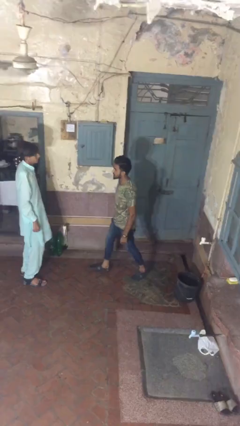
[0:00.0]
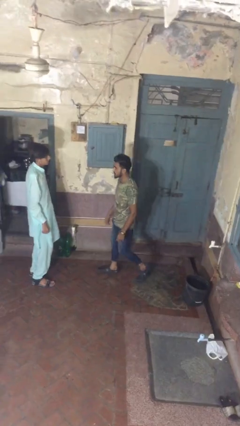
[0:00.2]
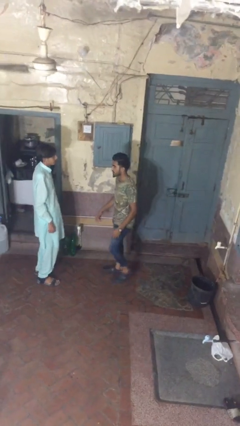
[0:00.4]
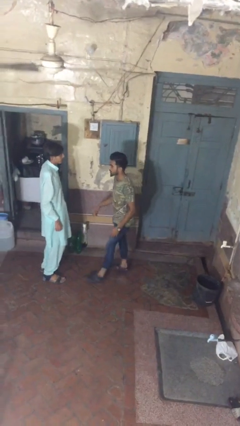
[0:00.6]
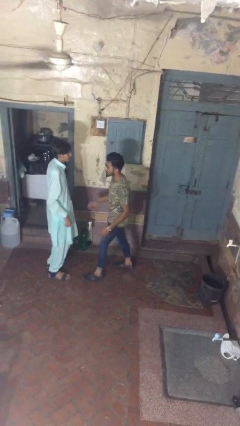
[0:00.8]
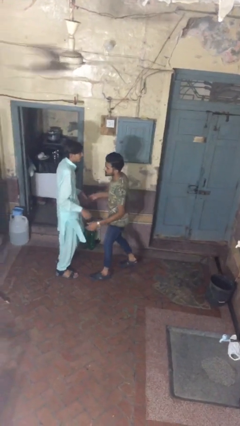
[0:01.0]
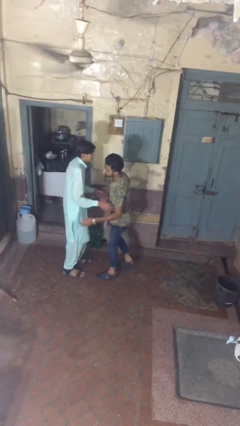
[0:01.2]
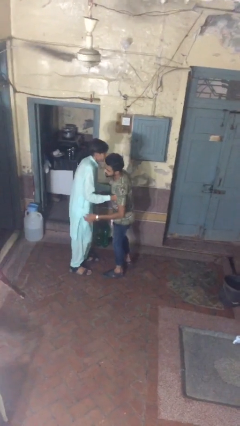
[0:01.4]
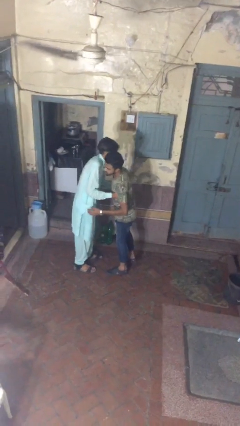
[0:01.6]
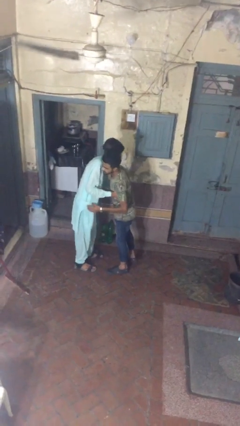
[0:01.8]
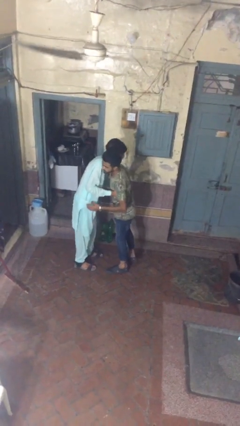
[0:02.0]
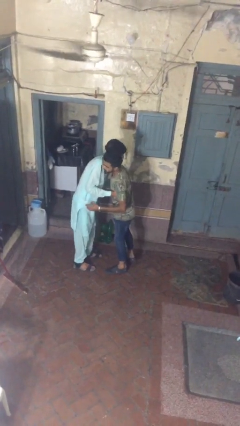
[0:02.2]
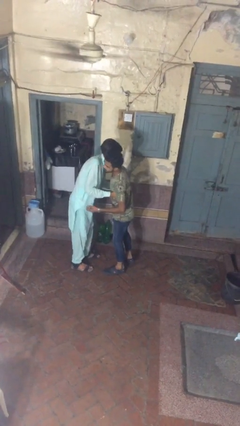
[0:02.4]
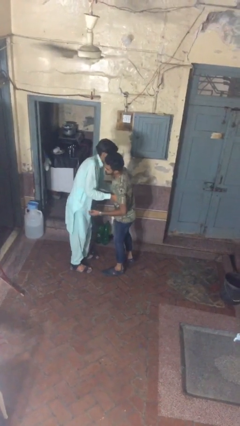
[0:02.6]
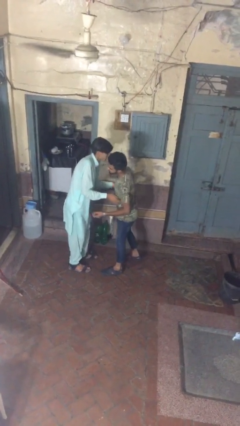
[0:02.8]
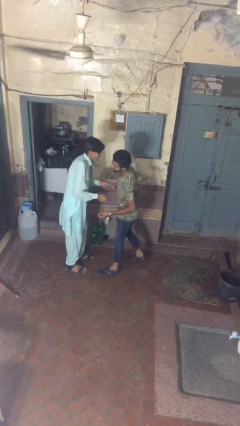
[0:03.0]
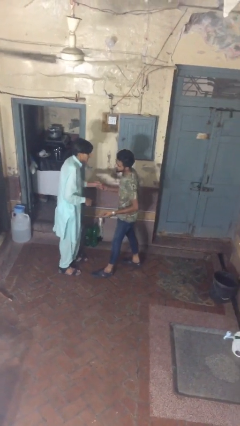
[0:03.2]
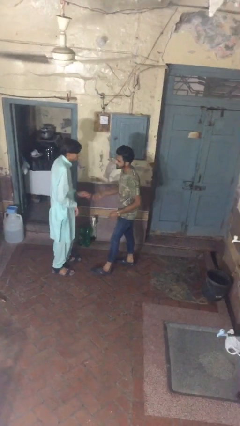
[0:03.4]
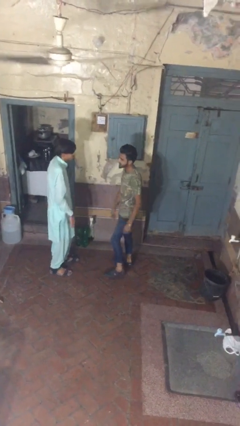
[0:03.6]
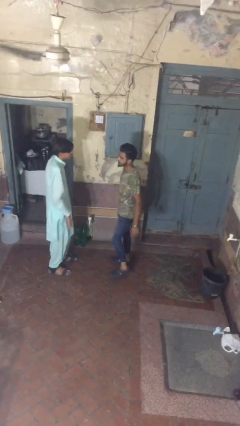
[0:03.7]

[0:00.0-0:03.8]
person embraces person

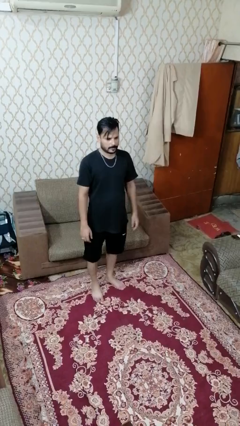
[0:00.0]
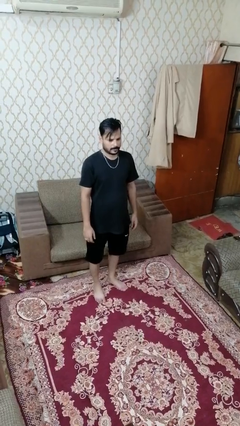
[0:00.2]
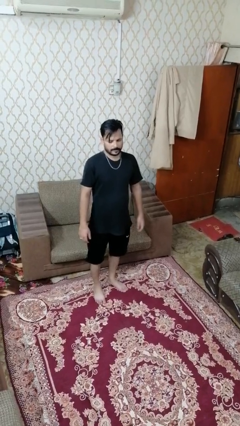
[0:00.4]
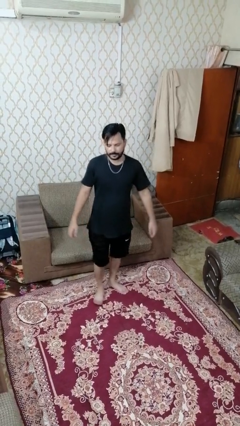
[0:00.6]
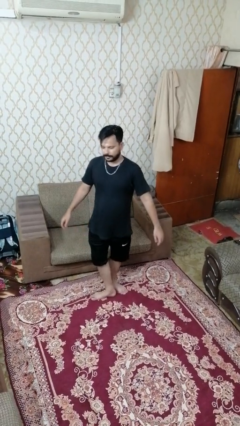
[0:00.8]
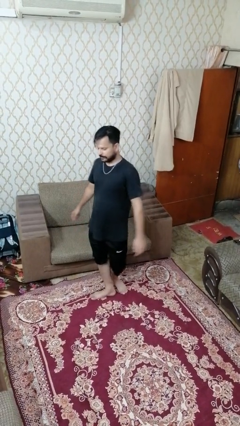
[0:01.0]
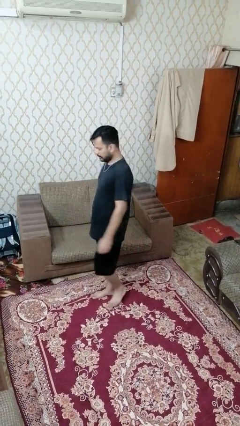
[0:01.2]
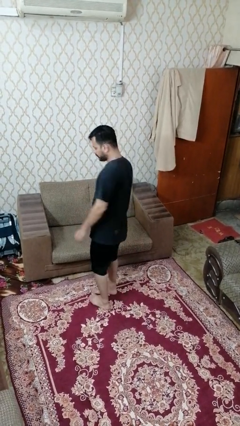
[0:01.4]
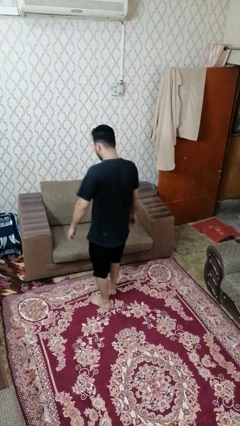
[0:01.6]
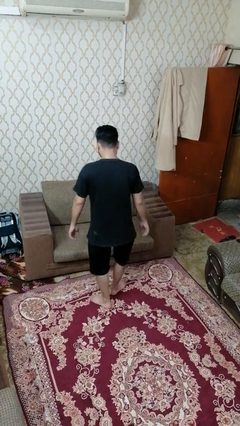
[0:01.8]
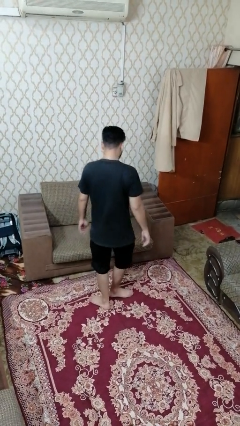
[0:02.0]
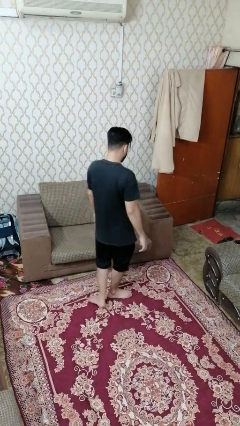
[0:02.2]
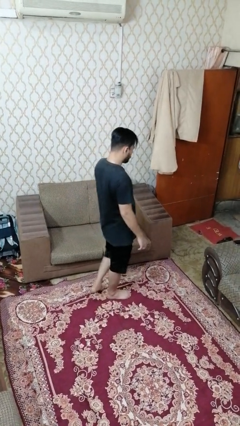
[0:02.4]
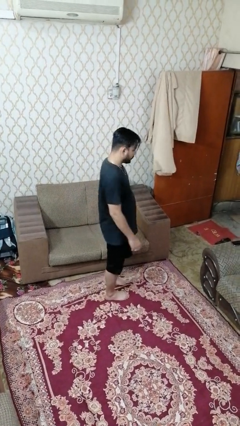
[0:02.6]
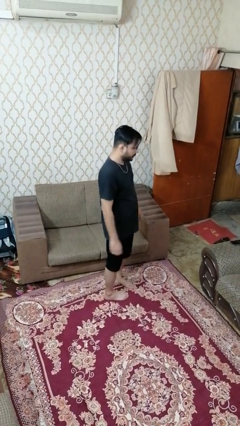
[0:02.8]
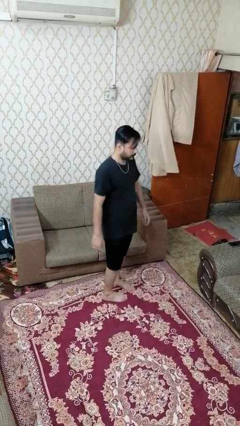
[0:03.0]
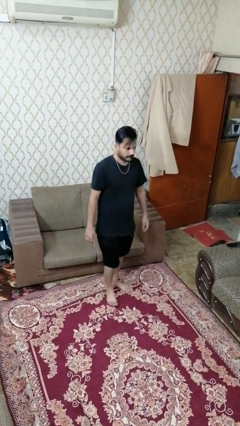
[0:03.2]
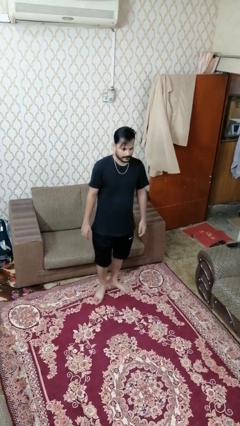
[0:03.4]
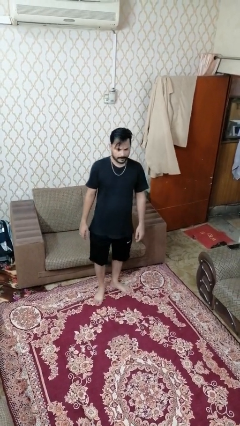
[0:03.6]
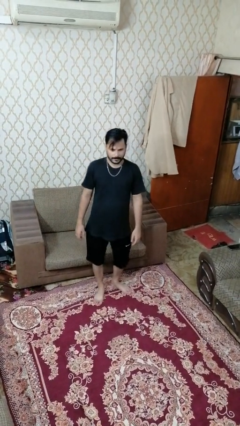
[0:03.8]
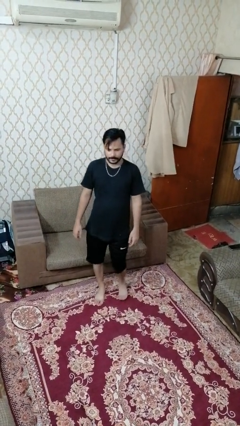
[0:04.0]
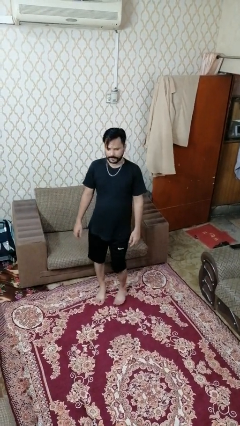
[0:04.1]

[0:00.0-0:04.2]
person twirls

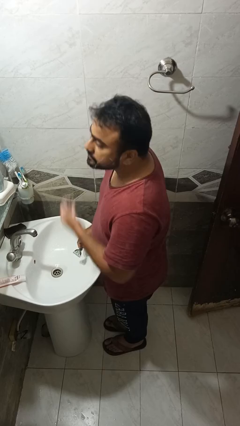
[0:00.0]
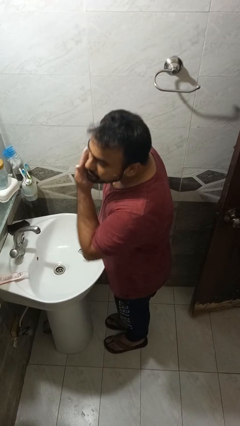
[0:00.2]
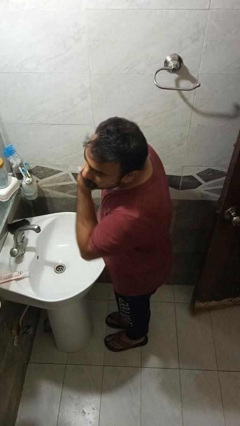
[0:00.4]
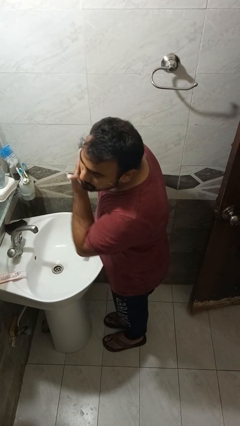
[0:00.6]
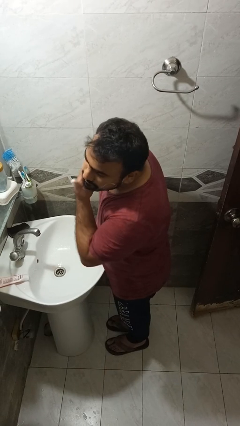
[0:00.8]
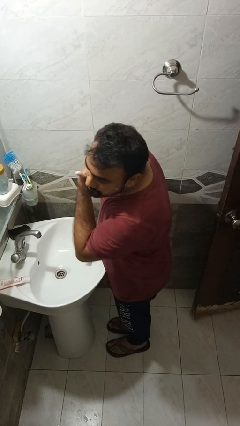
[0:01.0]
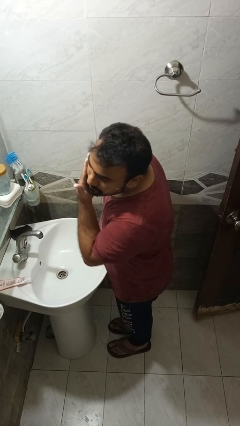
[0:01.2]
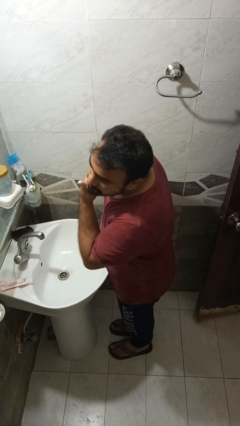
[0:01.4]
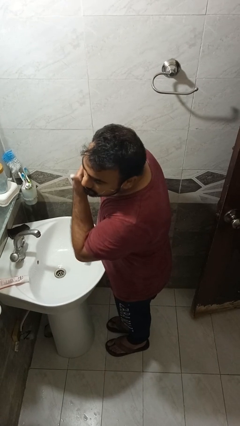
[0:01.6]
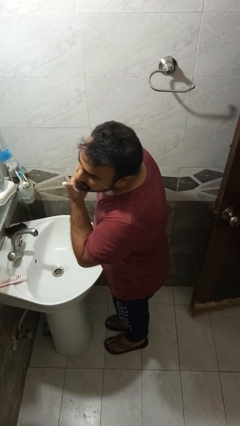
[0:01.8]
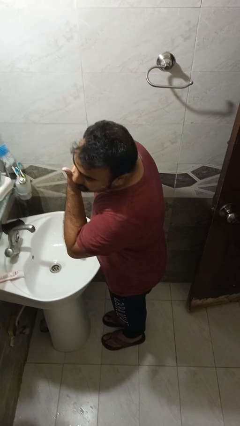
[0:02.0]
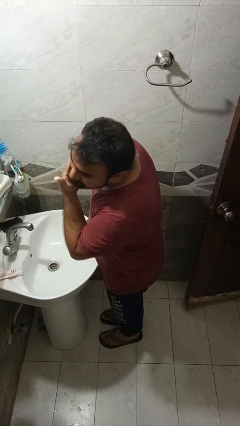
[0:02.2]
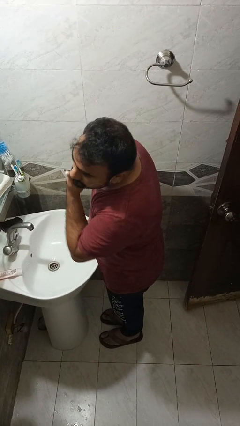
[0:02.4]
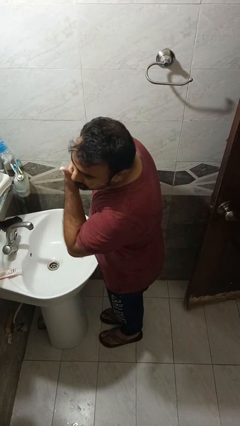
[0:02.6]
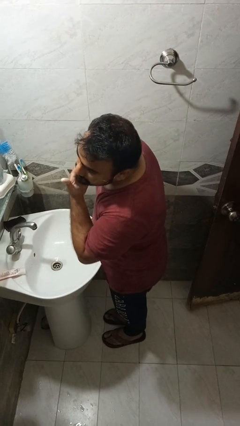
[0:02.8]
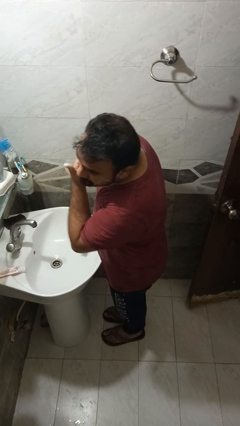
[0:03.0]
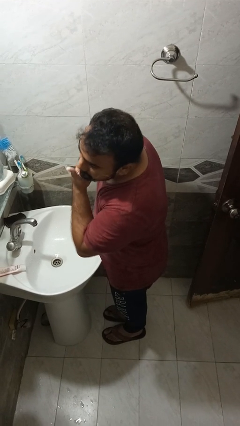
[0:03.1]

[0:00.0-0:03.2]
person applies shaving cream

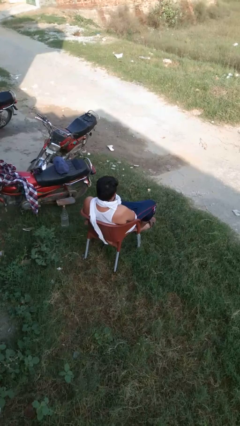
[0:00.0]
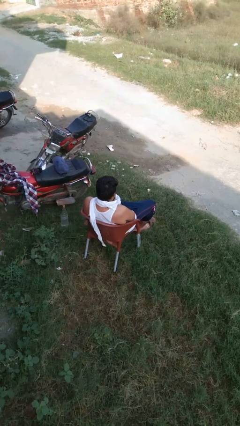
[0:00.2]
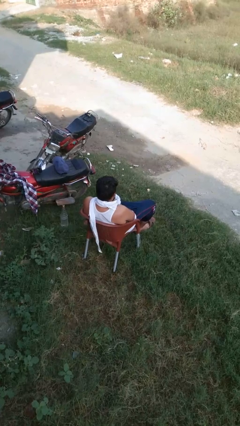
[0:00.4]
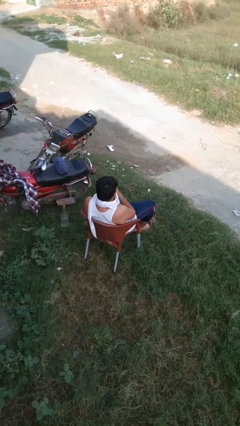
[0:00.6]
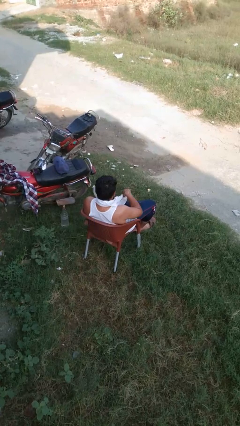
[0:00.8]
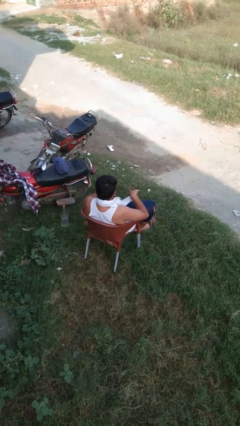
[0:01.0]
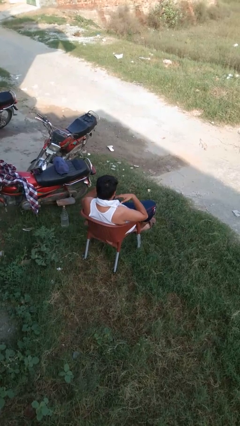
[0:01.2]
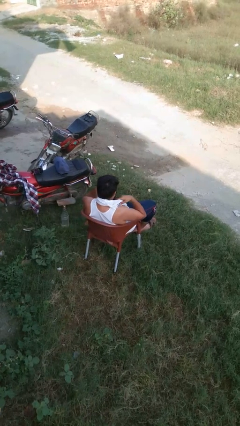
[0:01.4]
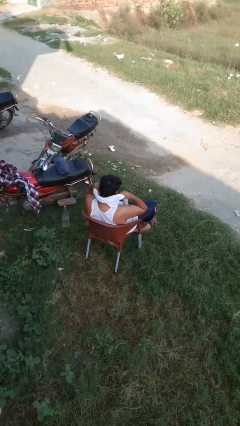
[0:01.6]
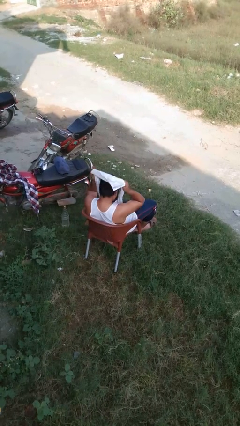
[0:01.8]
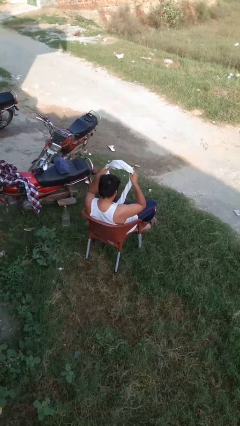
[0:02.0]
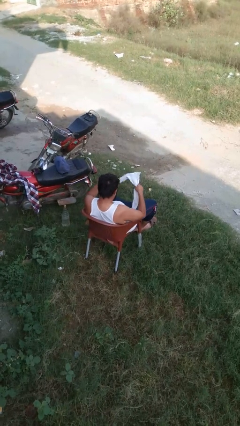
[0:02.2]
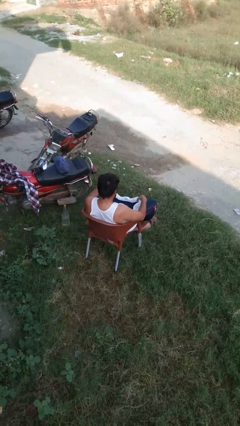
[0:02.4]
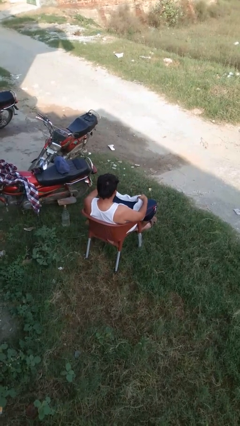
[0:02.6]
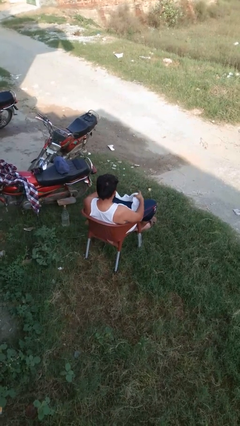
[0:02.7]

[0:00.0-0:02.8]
person takes off scarf

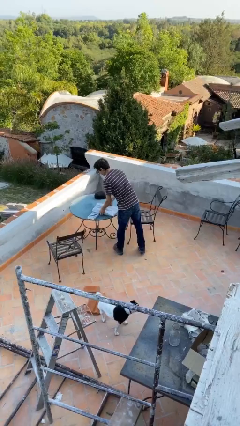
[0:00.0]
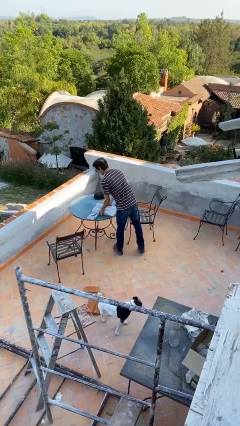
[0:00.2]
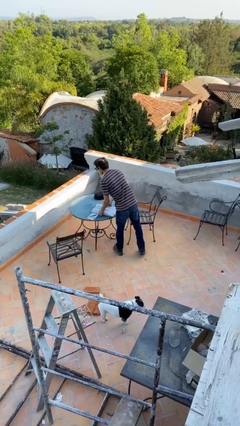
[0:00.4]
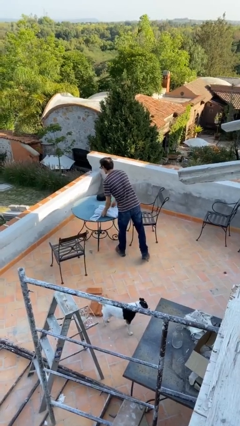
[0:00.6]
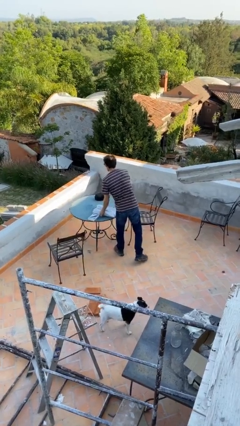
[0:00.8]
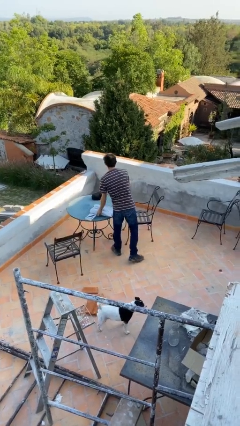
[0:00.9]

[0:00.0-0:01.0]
person puts down object on table

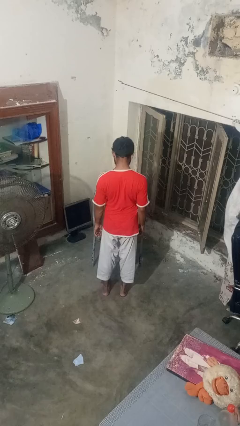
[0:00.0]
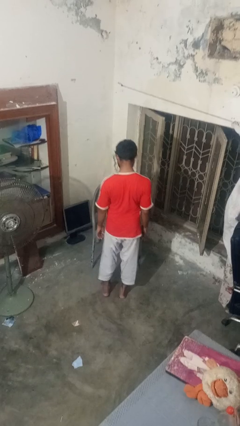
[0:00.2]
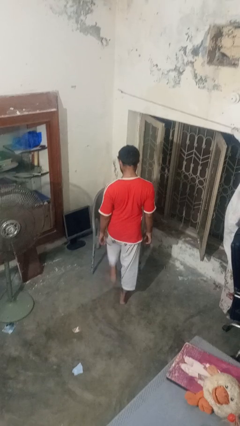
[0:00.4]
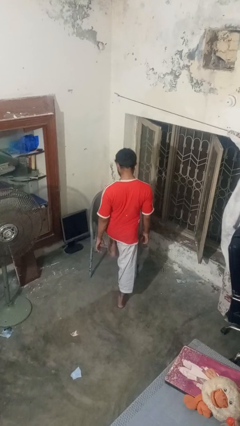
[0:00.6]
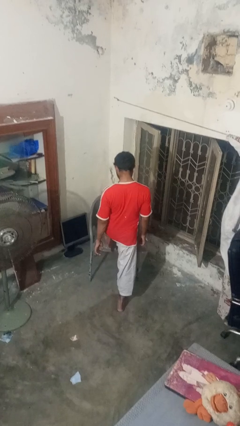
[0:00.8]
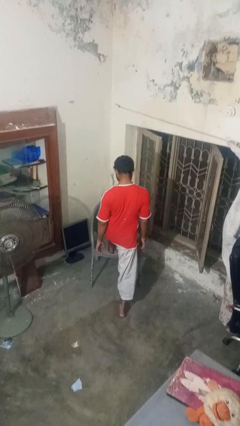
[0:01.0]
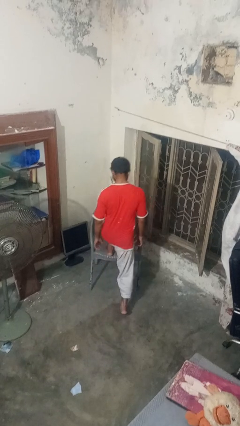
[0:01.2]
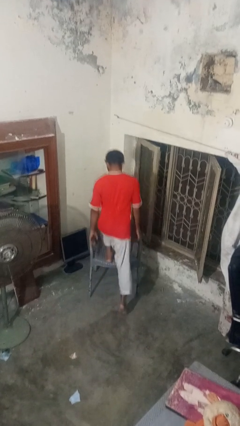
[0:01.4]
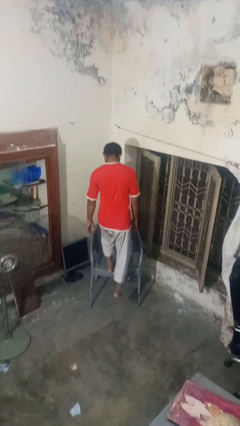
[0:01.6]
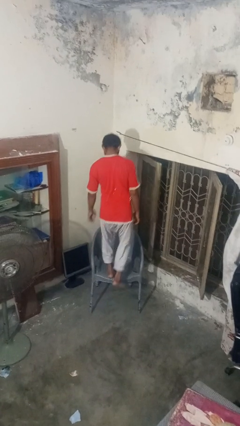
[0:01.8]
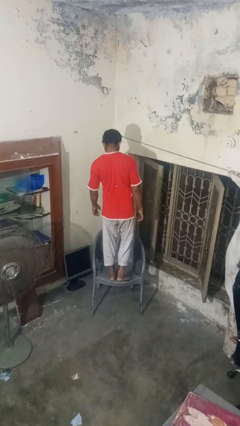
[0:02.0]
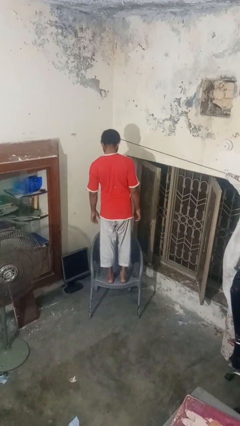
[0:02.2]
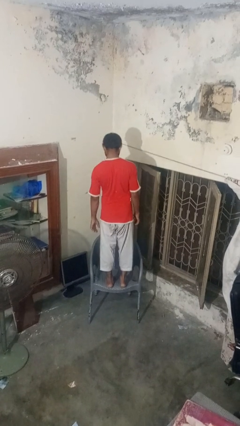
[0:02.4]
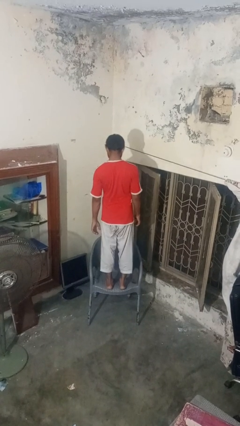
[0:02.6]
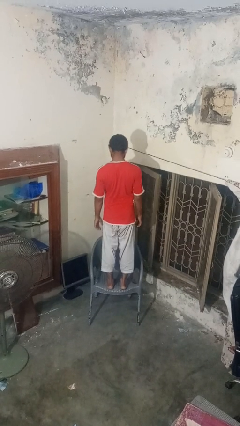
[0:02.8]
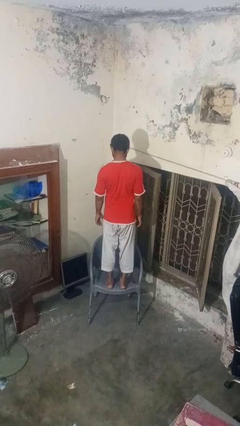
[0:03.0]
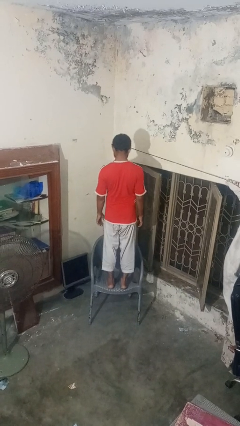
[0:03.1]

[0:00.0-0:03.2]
person climbs on chair
